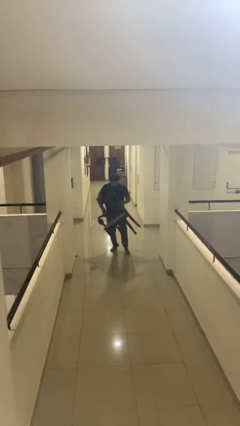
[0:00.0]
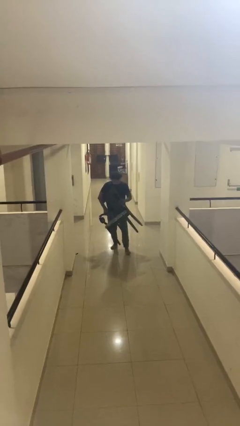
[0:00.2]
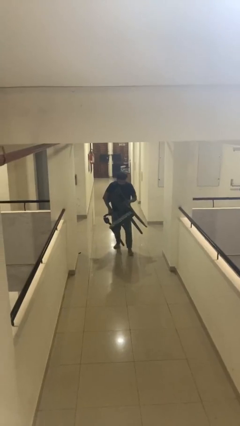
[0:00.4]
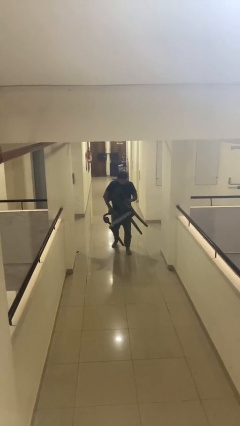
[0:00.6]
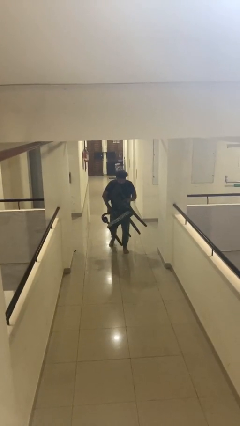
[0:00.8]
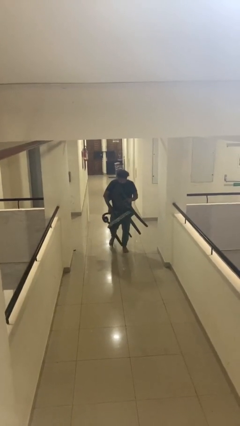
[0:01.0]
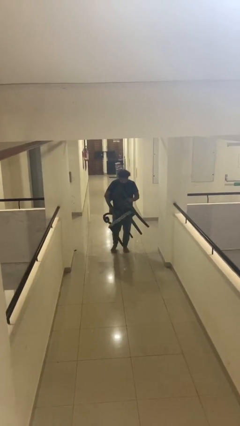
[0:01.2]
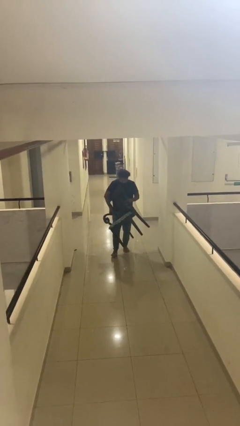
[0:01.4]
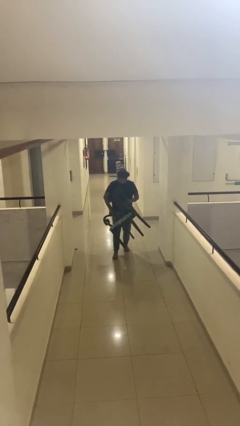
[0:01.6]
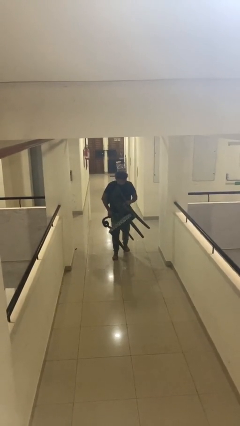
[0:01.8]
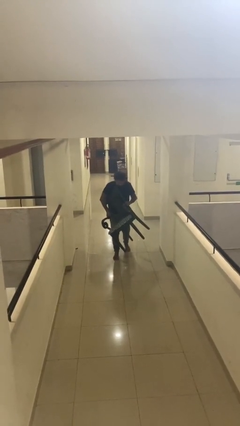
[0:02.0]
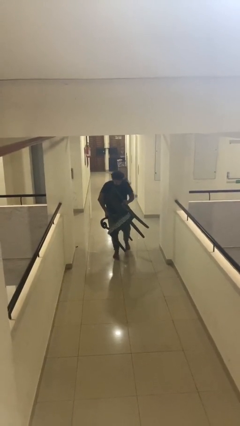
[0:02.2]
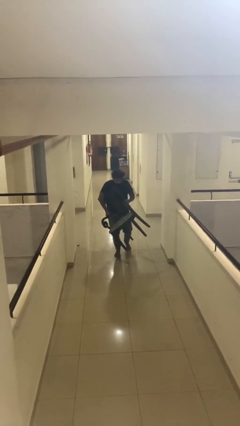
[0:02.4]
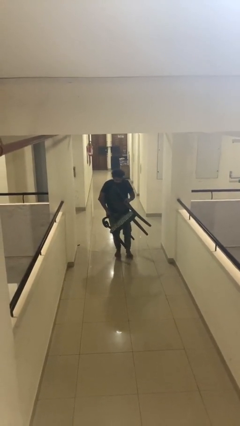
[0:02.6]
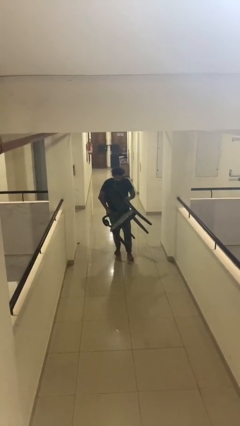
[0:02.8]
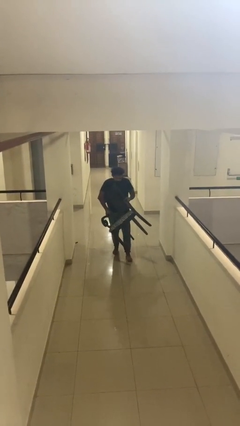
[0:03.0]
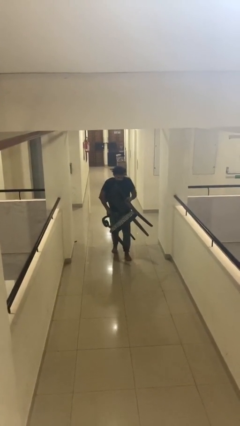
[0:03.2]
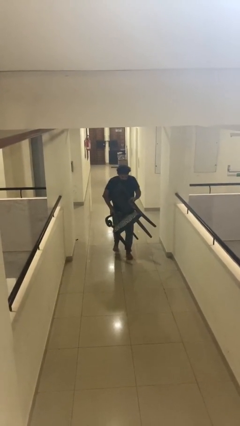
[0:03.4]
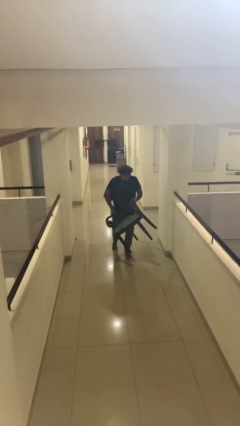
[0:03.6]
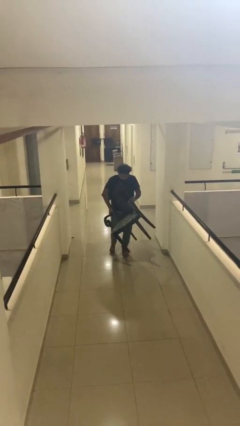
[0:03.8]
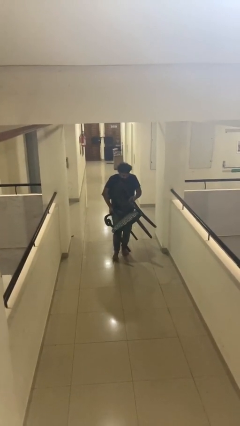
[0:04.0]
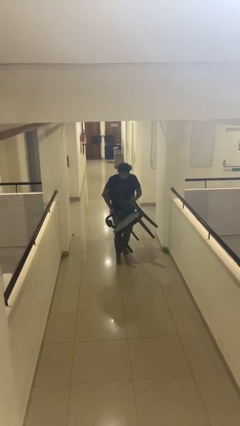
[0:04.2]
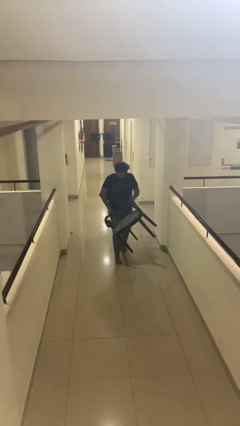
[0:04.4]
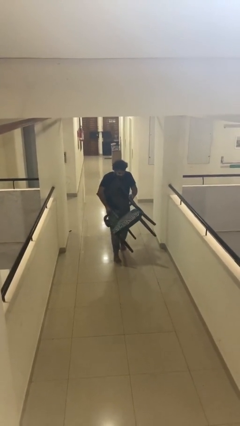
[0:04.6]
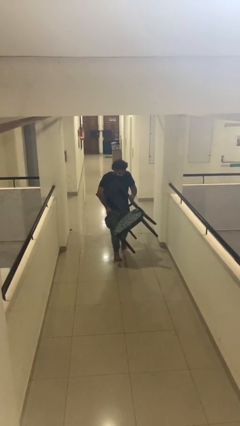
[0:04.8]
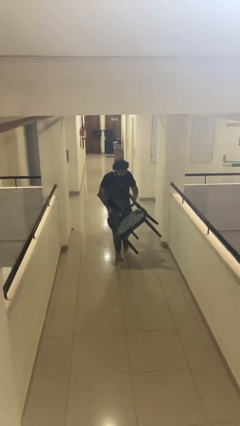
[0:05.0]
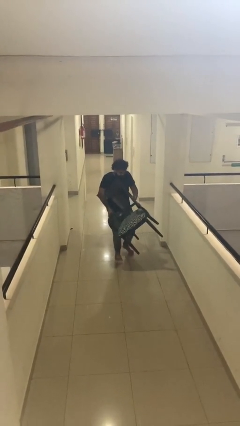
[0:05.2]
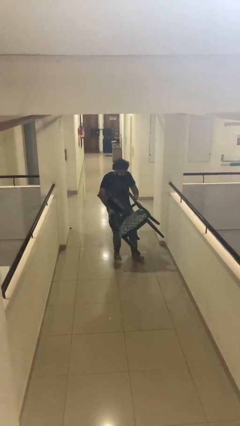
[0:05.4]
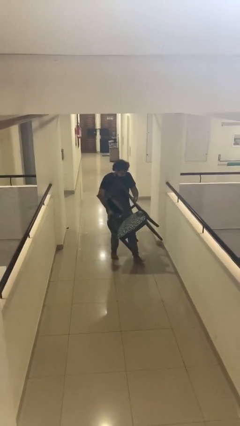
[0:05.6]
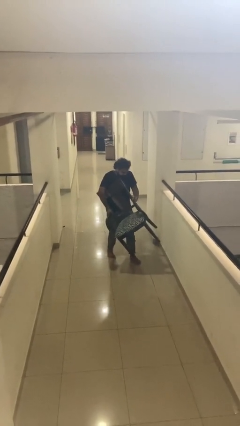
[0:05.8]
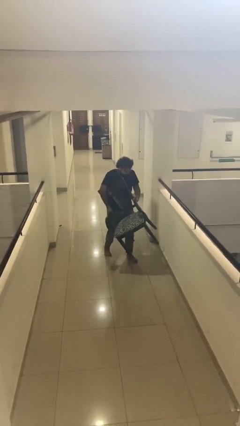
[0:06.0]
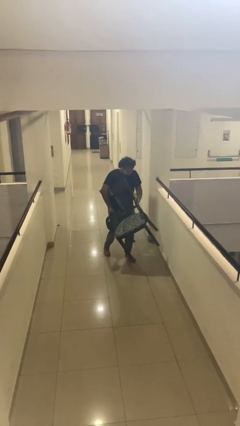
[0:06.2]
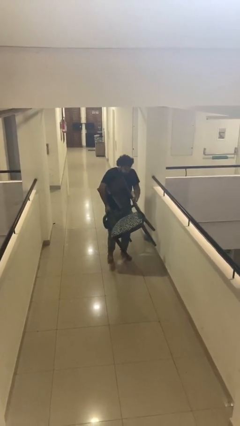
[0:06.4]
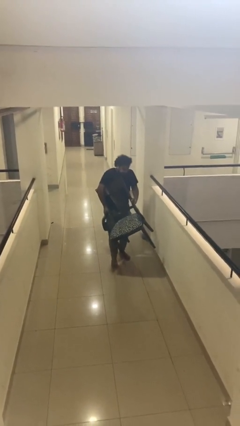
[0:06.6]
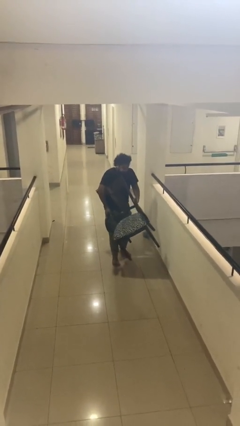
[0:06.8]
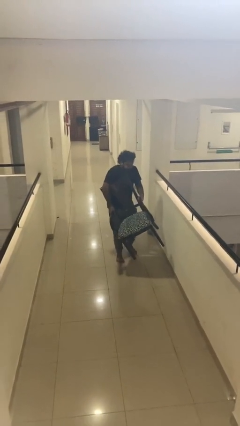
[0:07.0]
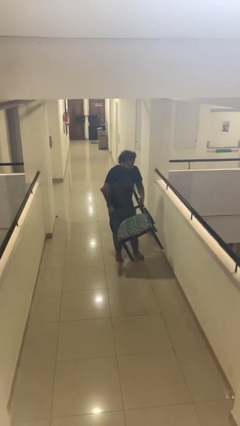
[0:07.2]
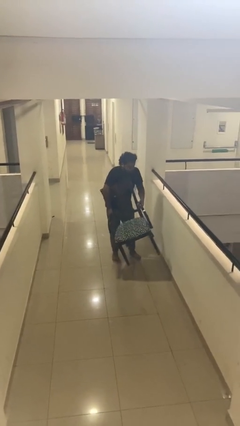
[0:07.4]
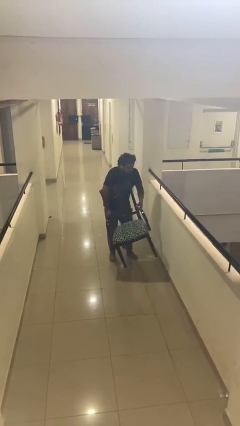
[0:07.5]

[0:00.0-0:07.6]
person carries heavy object

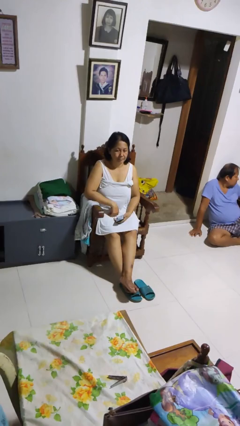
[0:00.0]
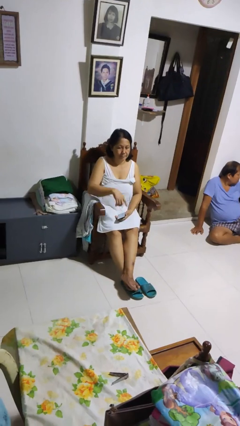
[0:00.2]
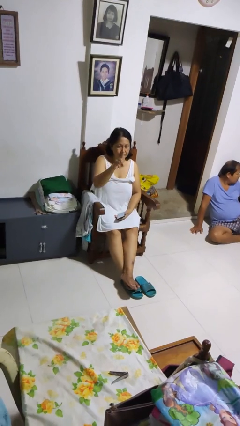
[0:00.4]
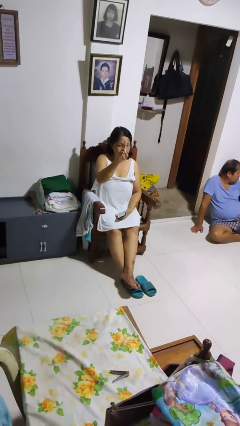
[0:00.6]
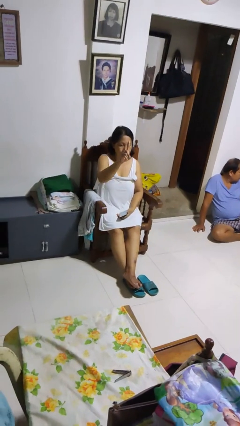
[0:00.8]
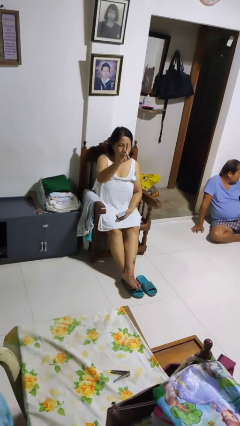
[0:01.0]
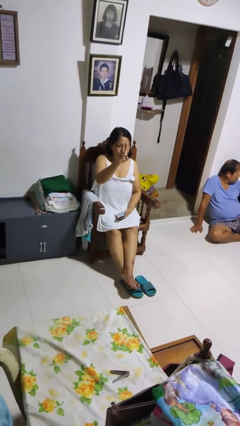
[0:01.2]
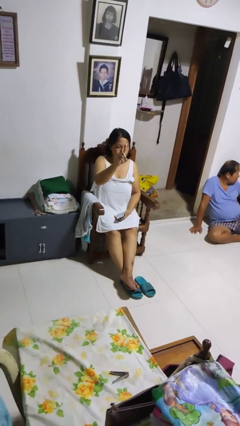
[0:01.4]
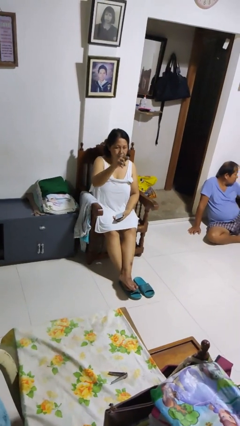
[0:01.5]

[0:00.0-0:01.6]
person gestures number one

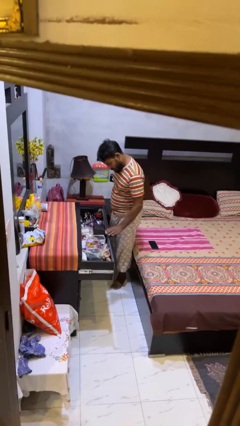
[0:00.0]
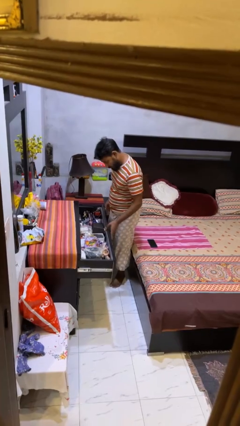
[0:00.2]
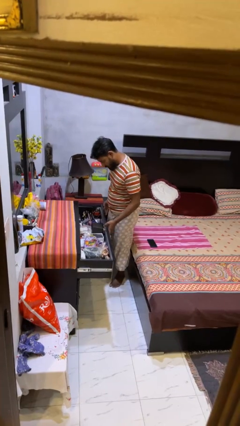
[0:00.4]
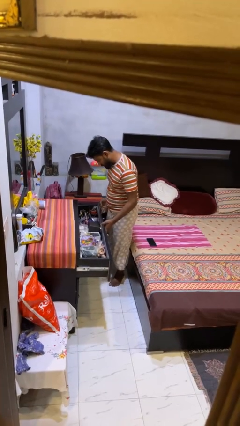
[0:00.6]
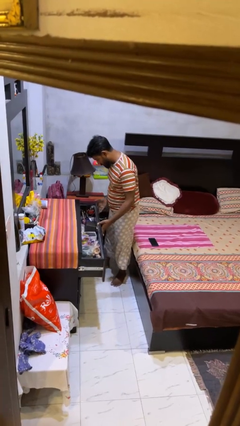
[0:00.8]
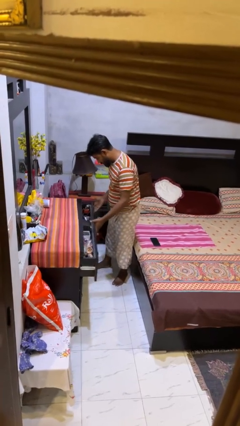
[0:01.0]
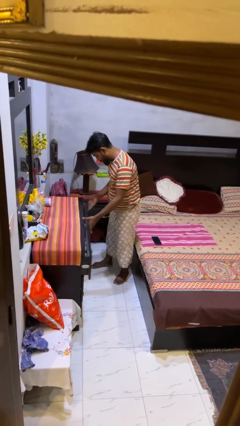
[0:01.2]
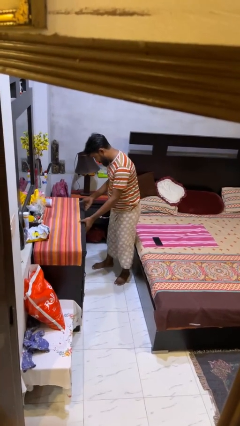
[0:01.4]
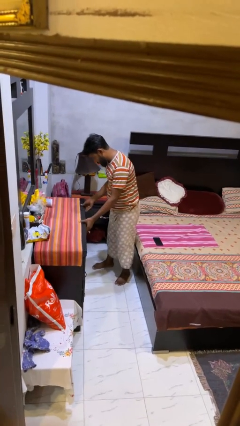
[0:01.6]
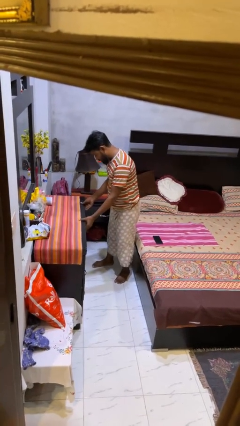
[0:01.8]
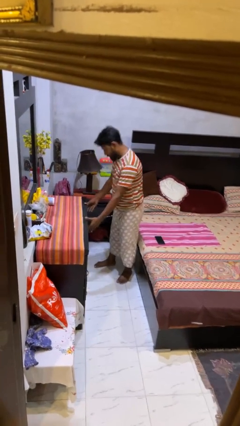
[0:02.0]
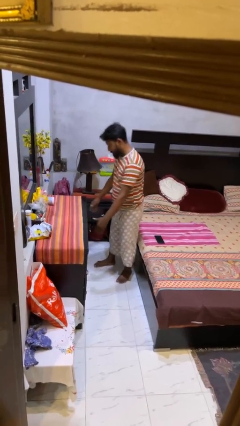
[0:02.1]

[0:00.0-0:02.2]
person closes dresser drawer

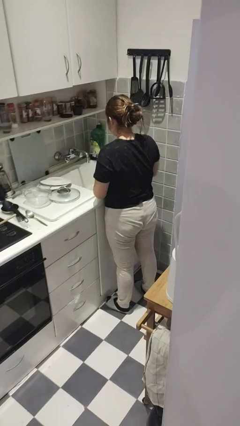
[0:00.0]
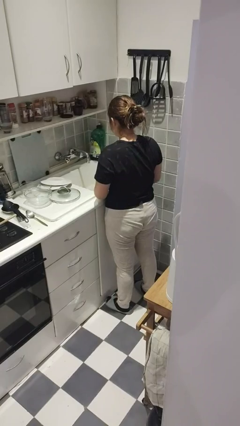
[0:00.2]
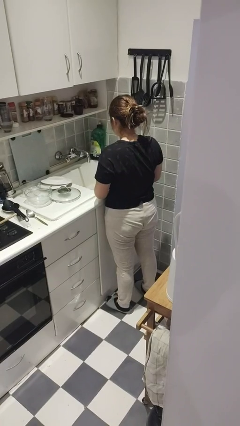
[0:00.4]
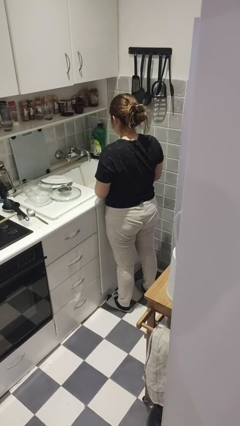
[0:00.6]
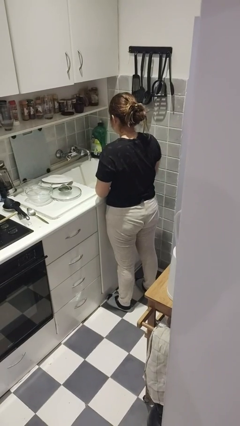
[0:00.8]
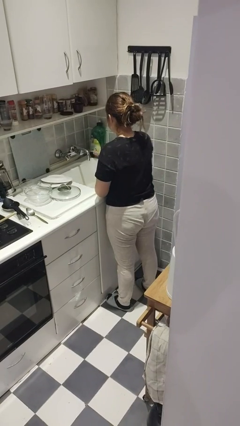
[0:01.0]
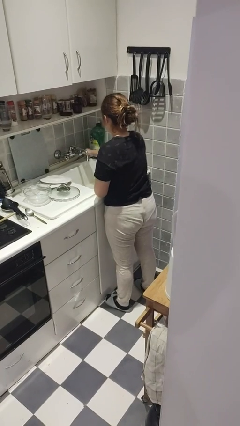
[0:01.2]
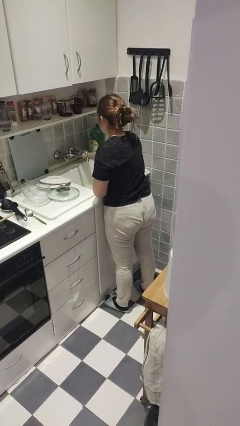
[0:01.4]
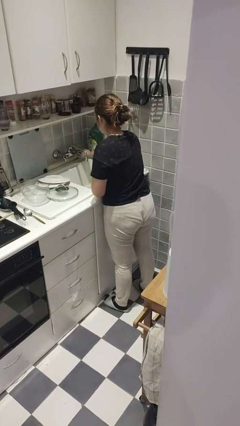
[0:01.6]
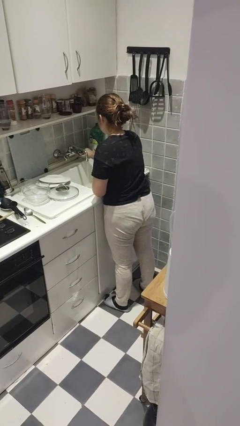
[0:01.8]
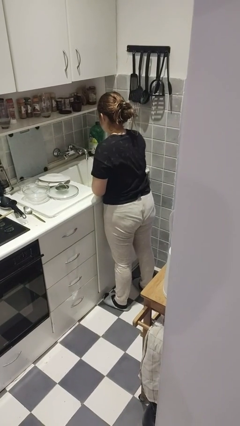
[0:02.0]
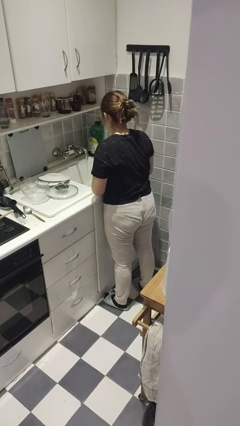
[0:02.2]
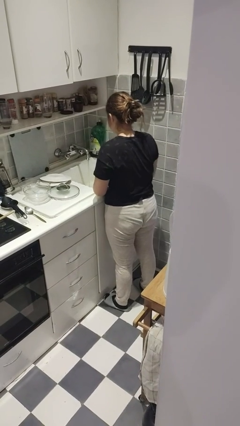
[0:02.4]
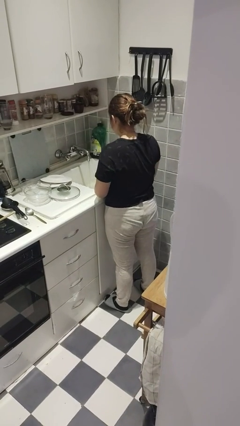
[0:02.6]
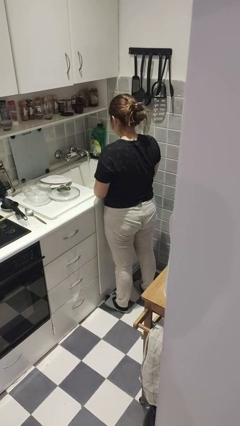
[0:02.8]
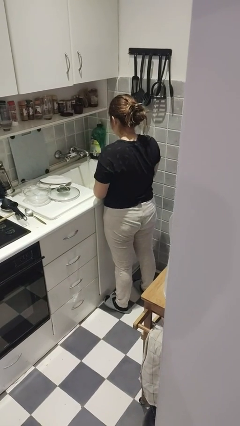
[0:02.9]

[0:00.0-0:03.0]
person turns on faucet

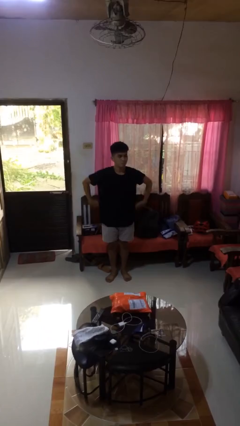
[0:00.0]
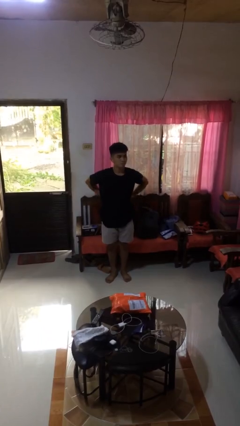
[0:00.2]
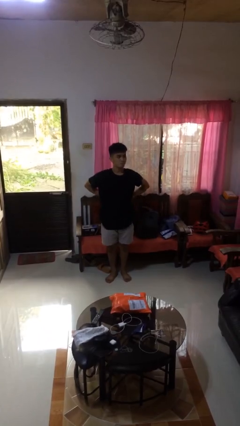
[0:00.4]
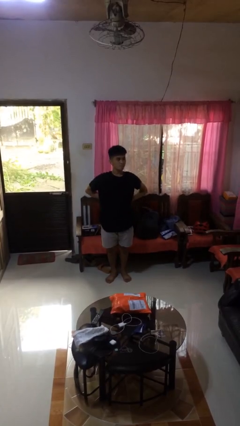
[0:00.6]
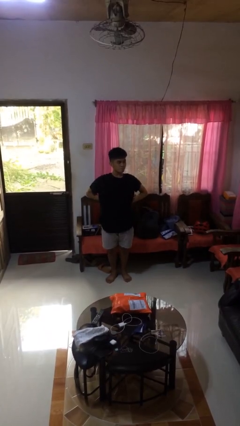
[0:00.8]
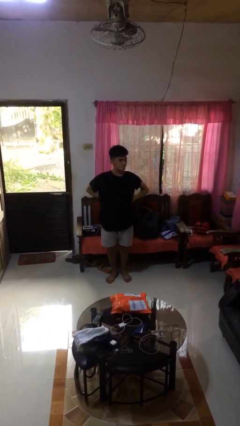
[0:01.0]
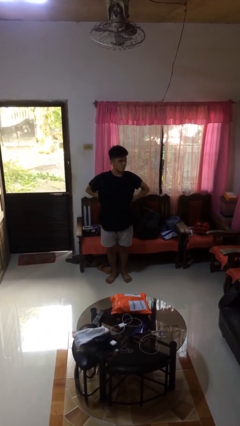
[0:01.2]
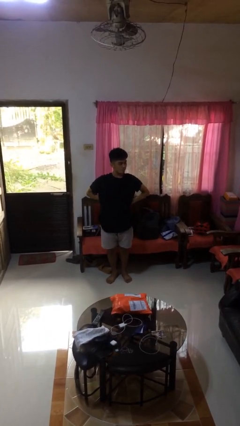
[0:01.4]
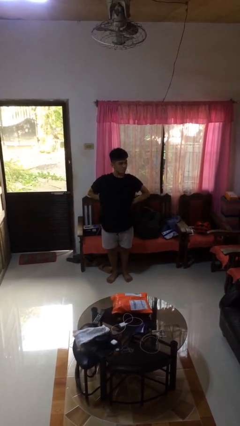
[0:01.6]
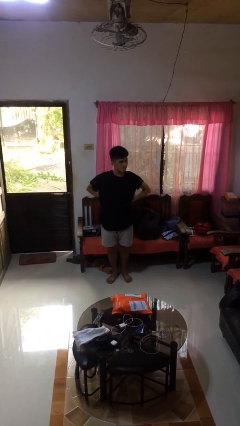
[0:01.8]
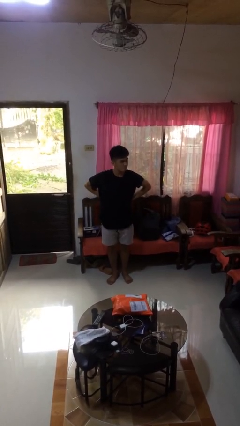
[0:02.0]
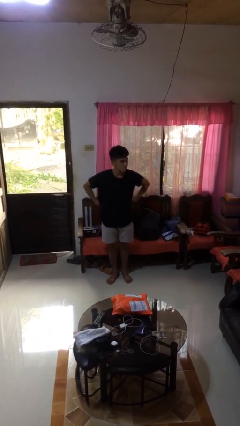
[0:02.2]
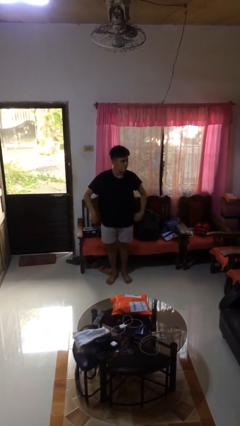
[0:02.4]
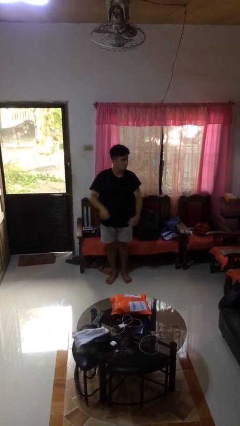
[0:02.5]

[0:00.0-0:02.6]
person stretches back

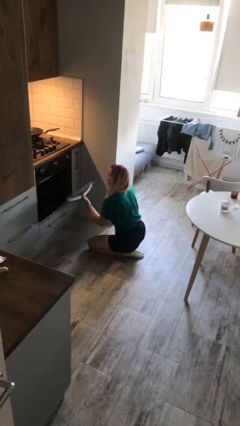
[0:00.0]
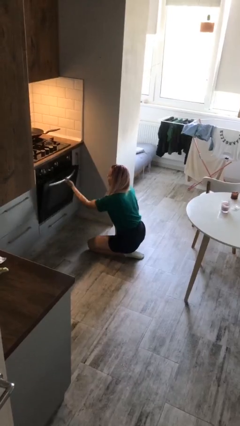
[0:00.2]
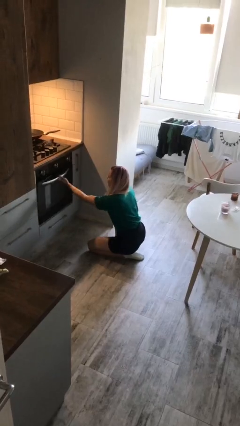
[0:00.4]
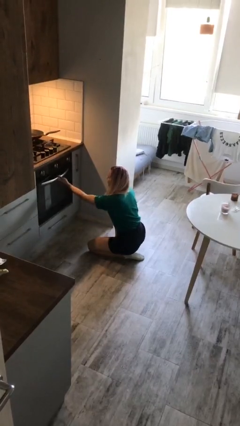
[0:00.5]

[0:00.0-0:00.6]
person closes oven door
